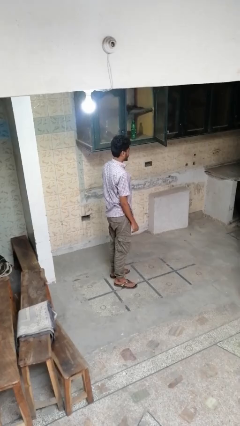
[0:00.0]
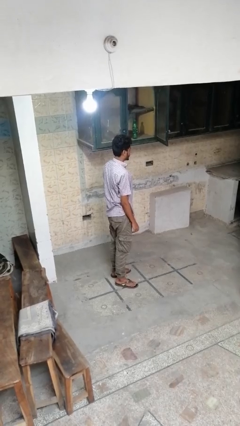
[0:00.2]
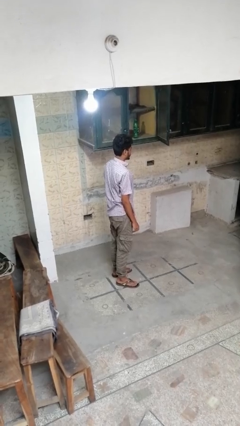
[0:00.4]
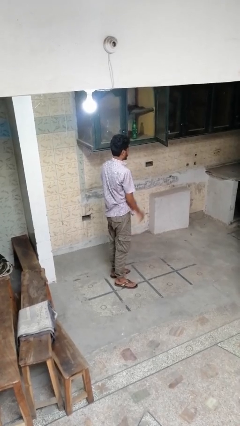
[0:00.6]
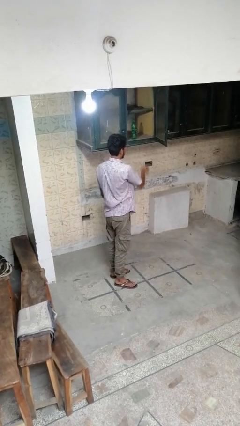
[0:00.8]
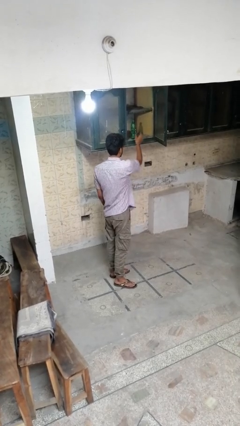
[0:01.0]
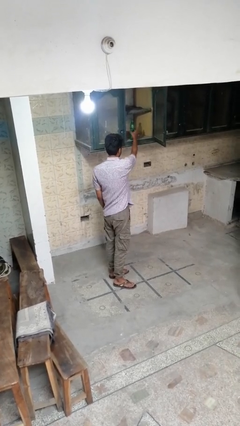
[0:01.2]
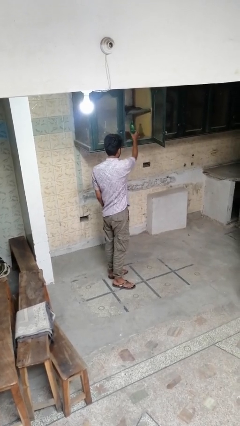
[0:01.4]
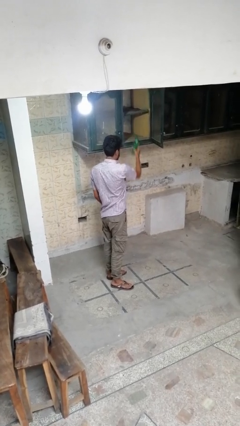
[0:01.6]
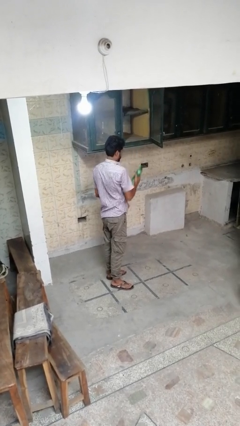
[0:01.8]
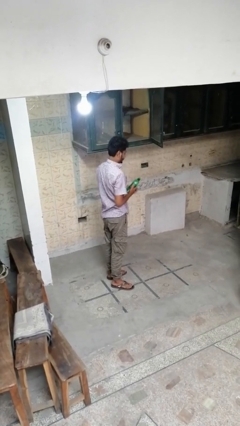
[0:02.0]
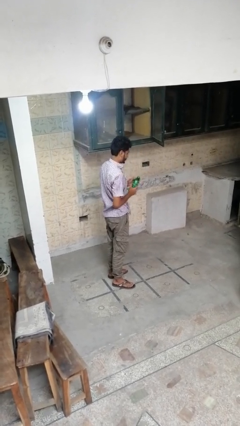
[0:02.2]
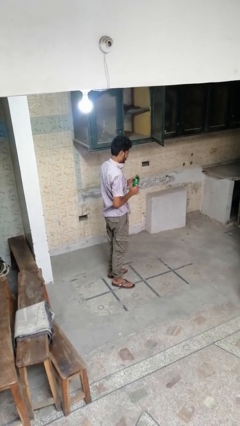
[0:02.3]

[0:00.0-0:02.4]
person picks up object from cabinet

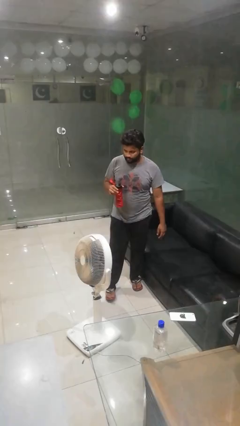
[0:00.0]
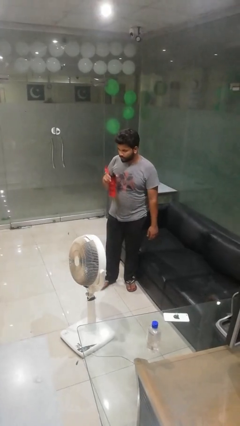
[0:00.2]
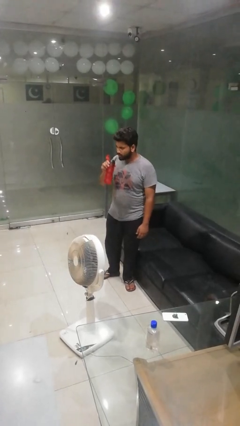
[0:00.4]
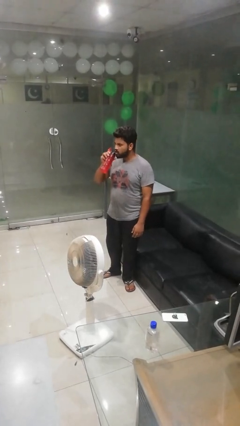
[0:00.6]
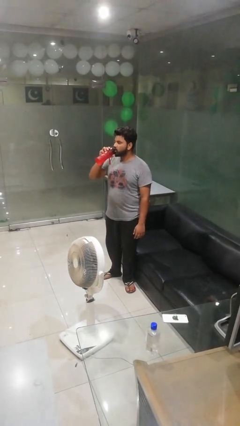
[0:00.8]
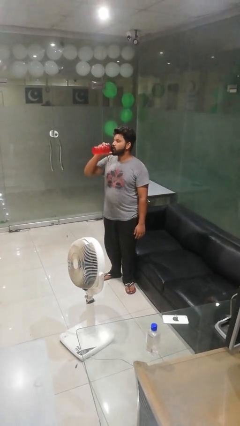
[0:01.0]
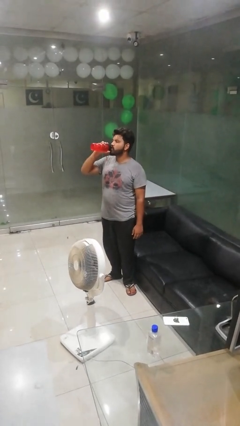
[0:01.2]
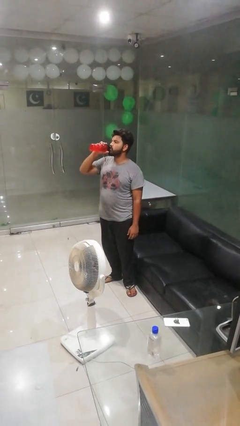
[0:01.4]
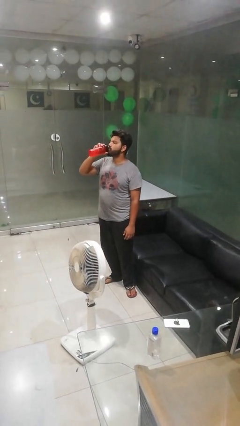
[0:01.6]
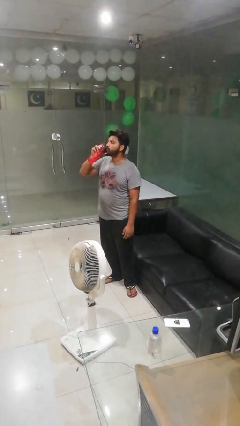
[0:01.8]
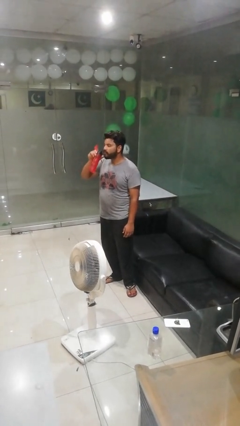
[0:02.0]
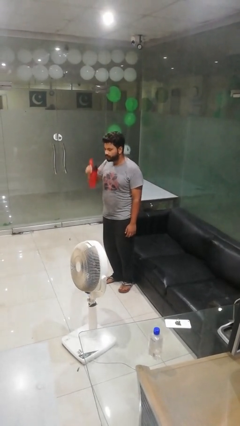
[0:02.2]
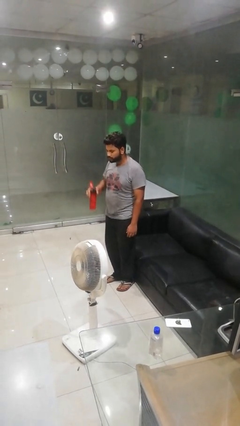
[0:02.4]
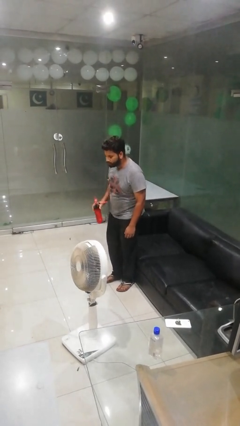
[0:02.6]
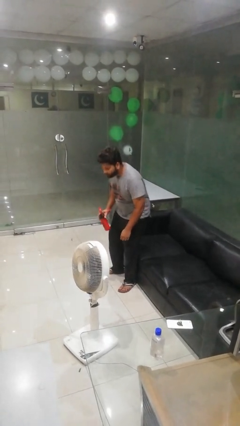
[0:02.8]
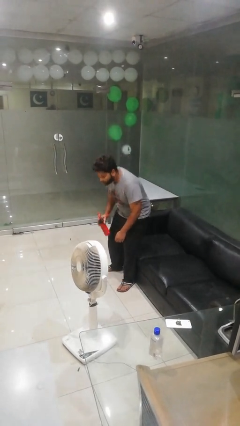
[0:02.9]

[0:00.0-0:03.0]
person drinks from bottle

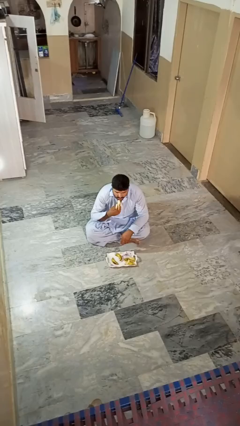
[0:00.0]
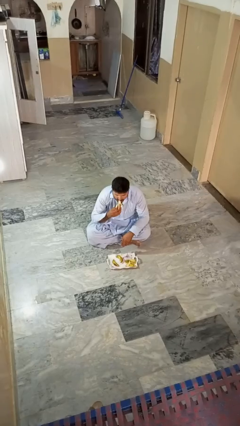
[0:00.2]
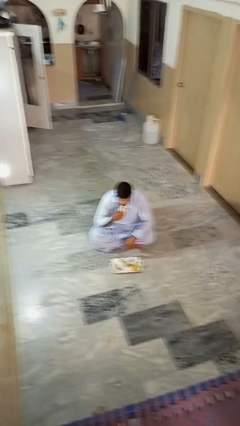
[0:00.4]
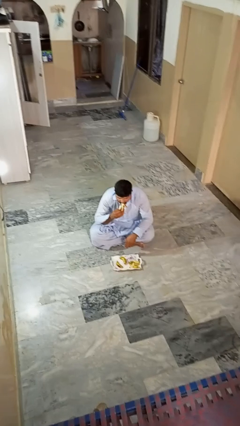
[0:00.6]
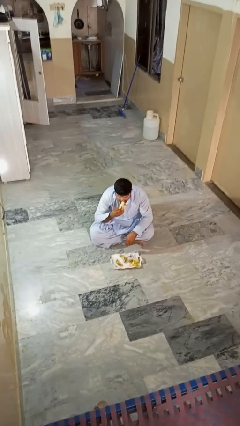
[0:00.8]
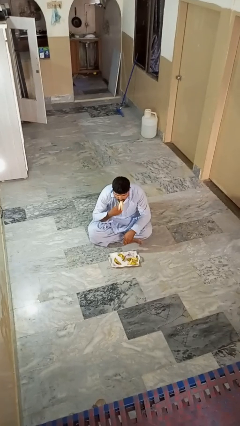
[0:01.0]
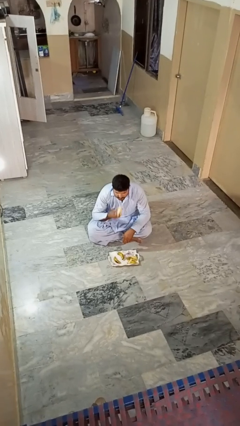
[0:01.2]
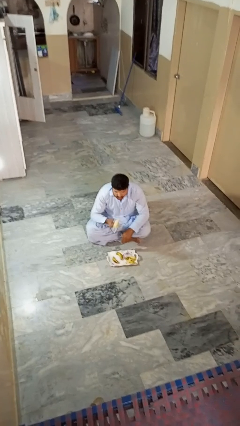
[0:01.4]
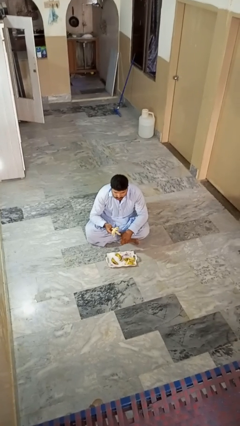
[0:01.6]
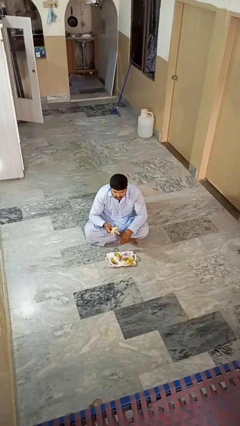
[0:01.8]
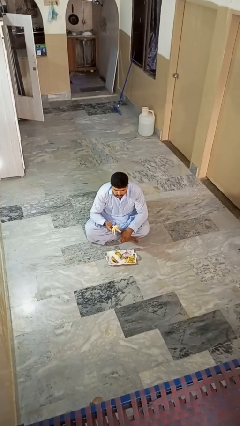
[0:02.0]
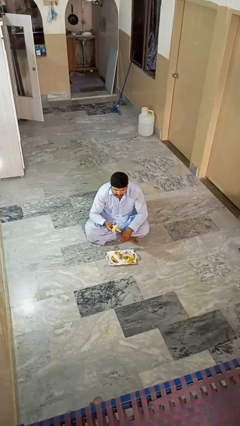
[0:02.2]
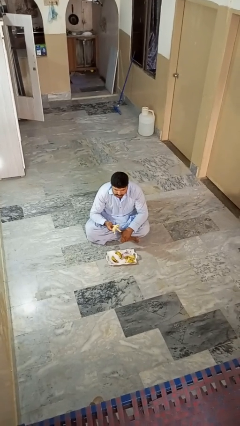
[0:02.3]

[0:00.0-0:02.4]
person eats banana

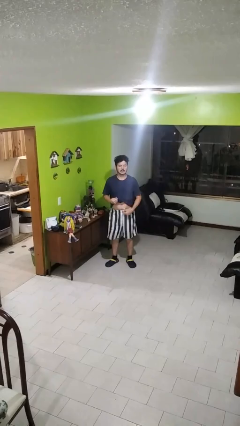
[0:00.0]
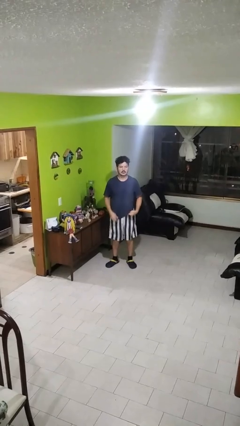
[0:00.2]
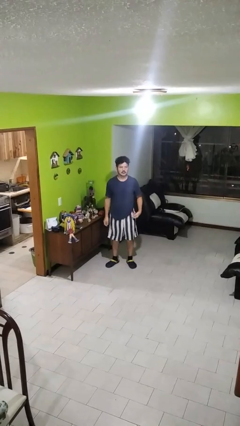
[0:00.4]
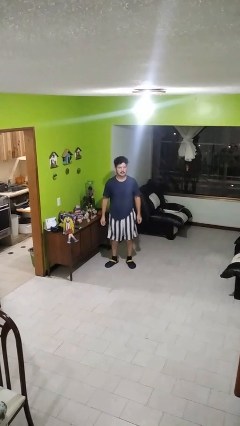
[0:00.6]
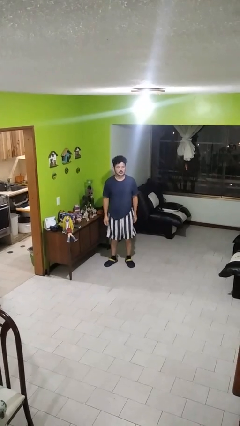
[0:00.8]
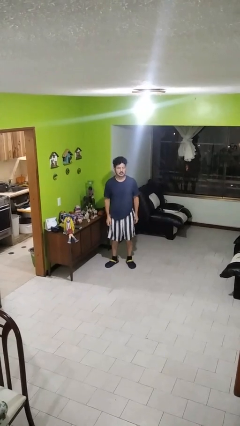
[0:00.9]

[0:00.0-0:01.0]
person untucks shirt

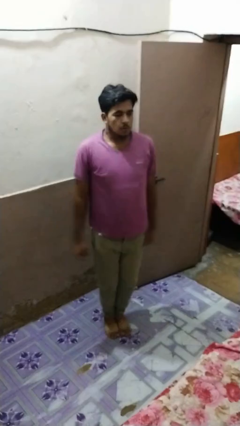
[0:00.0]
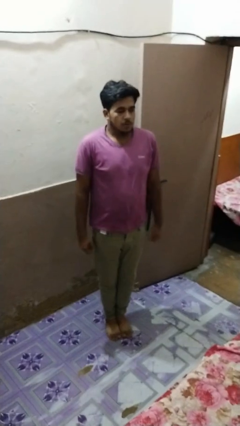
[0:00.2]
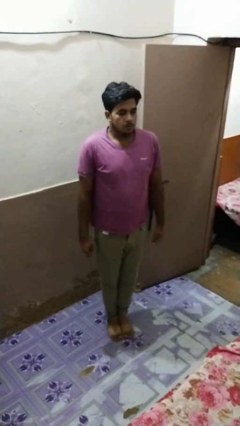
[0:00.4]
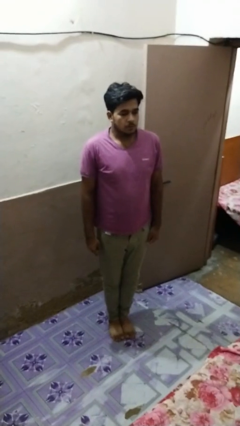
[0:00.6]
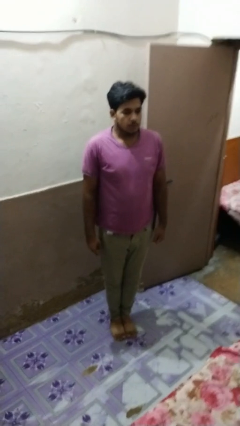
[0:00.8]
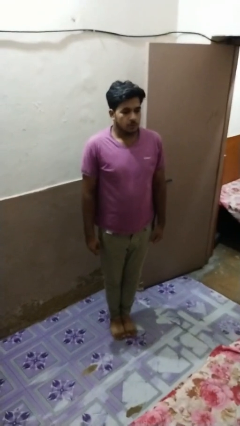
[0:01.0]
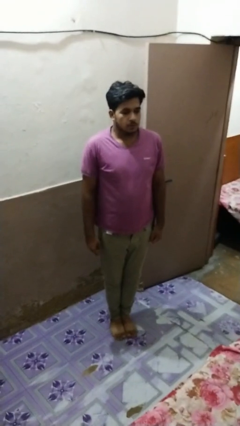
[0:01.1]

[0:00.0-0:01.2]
person exercises with jumping jacks

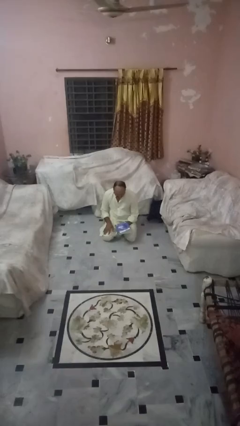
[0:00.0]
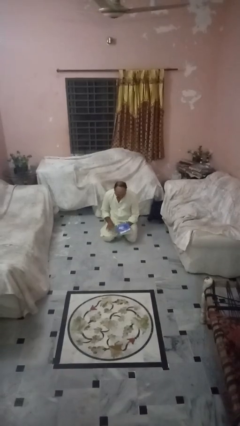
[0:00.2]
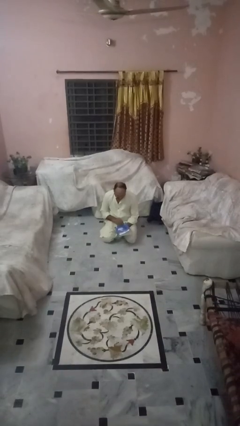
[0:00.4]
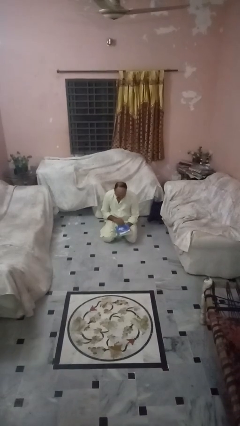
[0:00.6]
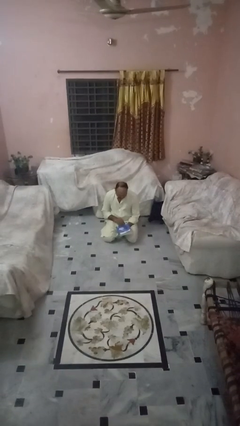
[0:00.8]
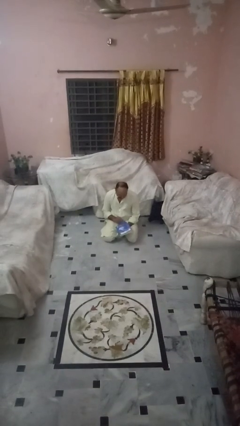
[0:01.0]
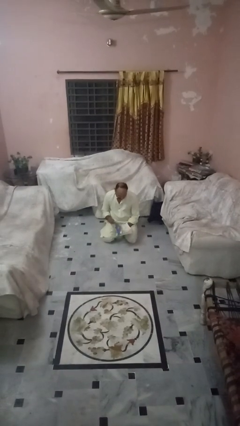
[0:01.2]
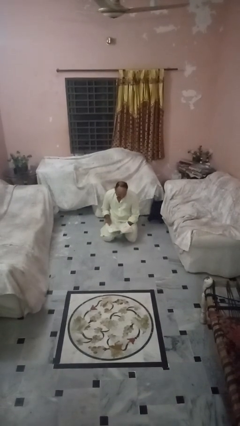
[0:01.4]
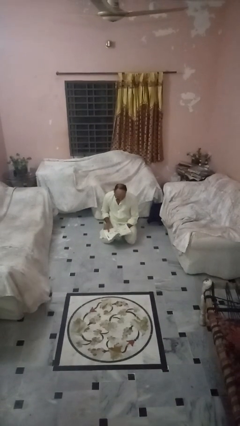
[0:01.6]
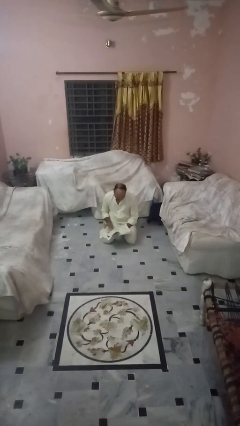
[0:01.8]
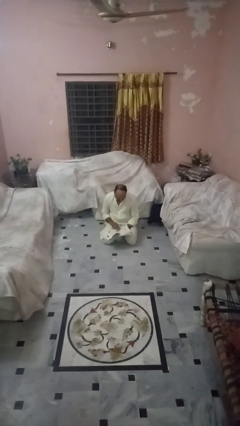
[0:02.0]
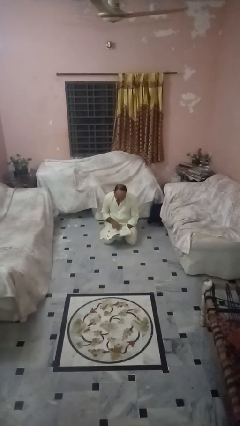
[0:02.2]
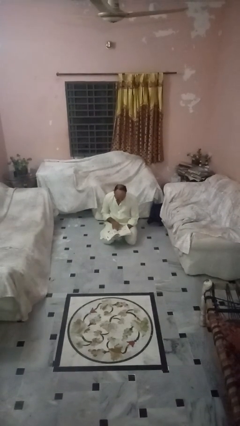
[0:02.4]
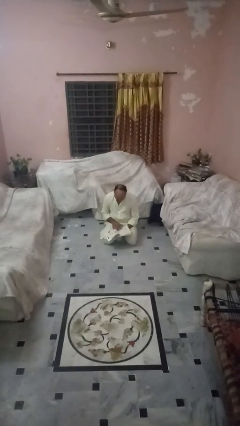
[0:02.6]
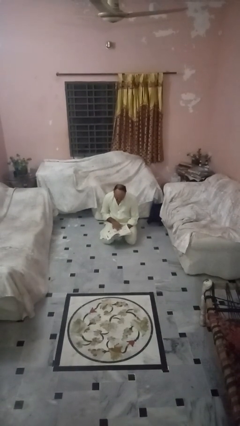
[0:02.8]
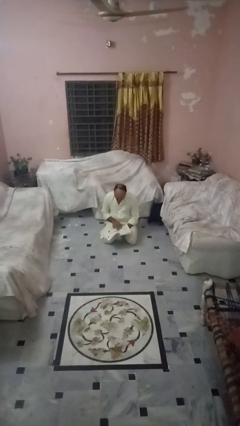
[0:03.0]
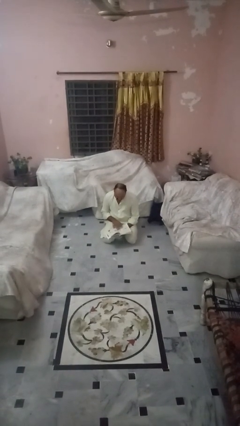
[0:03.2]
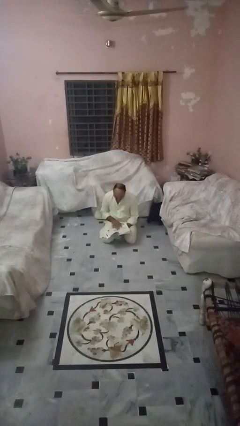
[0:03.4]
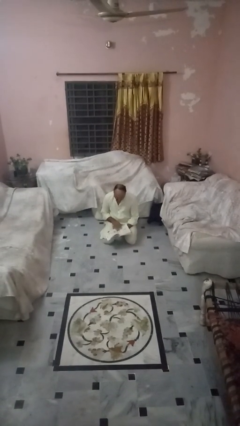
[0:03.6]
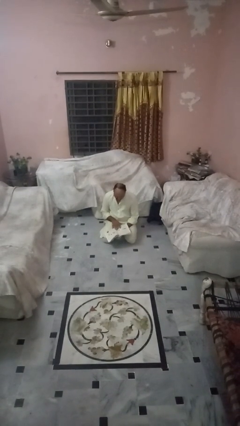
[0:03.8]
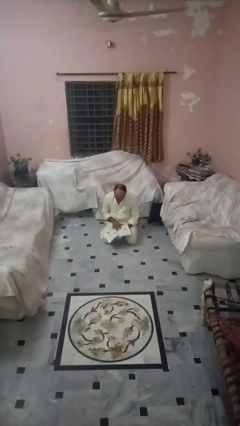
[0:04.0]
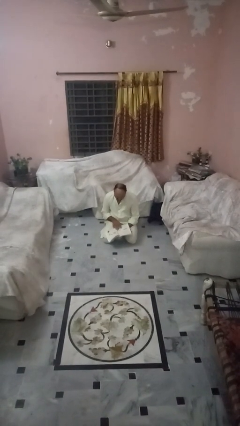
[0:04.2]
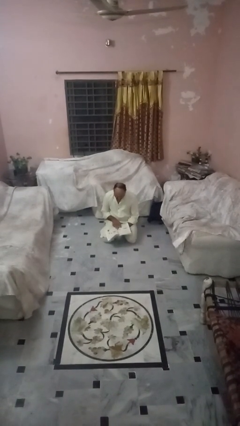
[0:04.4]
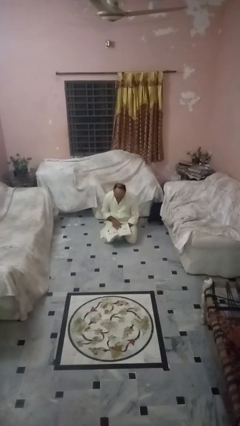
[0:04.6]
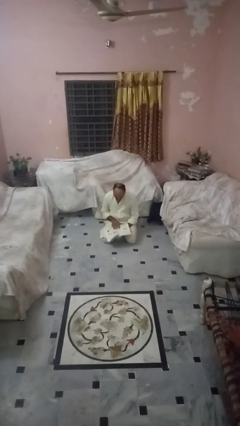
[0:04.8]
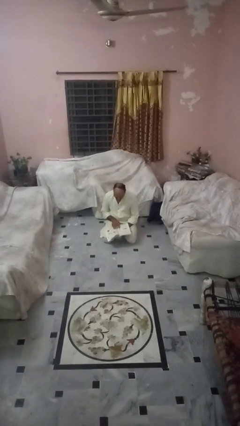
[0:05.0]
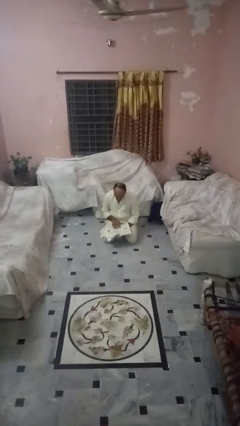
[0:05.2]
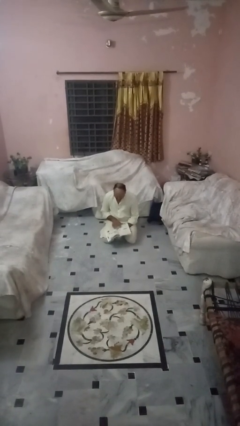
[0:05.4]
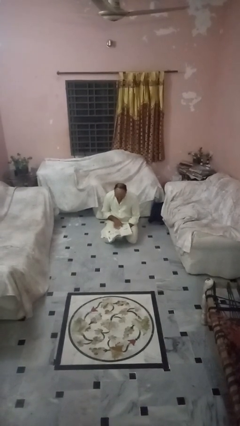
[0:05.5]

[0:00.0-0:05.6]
person reads book

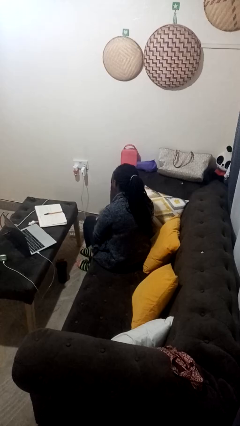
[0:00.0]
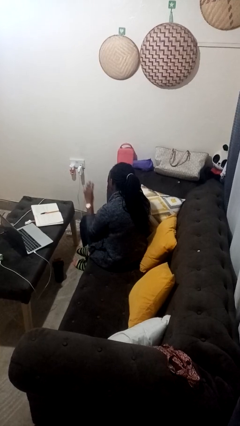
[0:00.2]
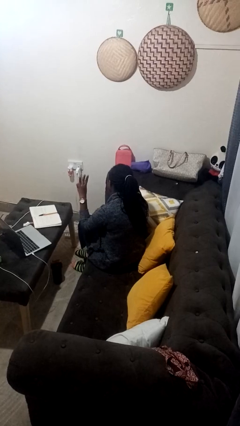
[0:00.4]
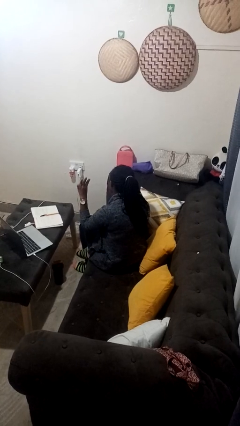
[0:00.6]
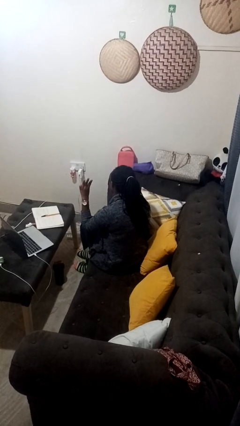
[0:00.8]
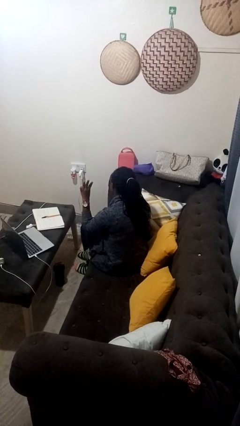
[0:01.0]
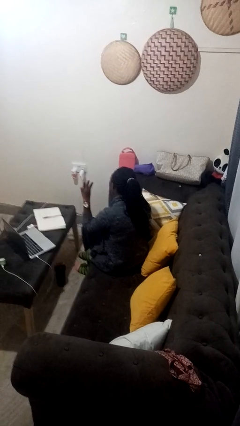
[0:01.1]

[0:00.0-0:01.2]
person gestures number three

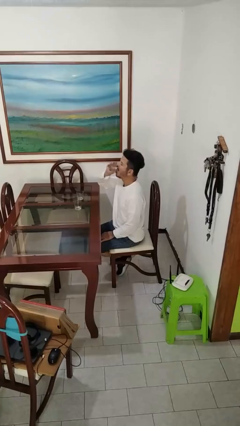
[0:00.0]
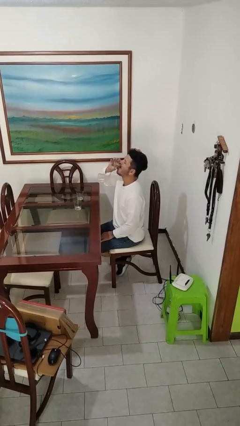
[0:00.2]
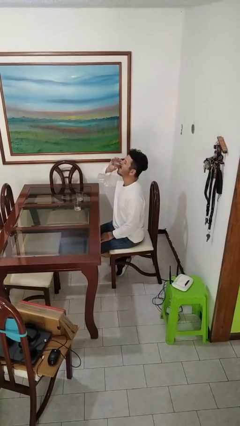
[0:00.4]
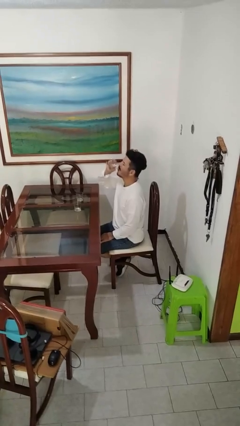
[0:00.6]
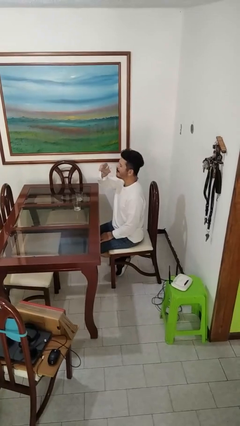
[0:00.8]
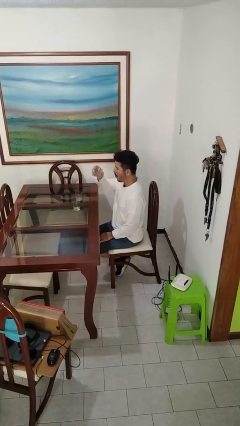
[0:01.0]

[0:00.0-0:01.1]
person drinks from shotglass
